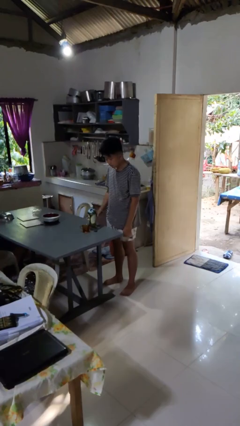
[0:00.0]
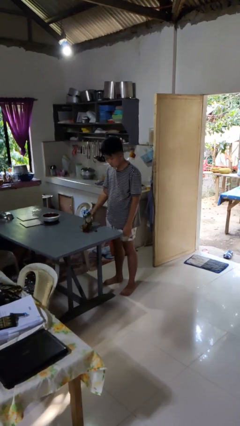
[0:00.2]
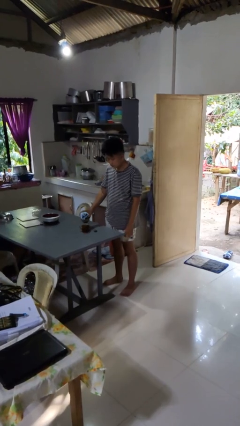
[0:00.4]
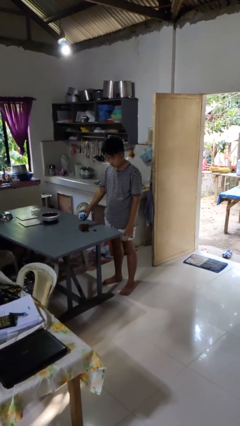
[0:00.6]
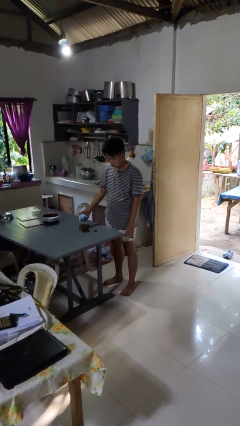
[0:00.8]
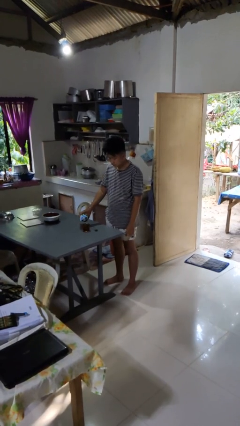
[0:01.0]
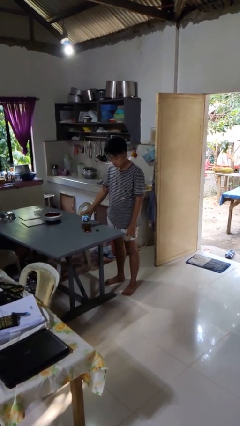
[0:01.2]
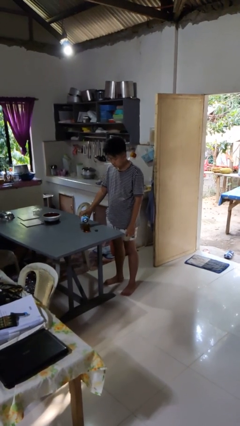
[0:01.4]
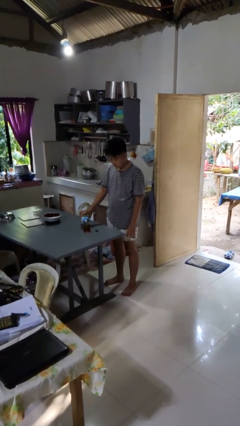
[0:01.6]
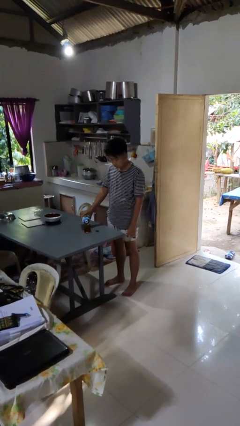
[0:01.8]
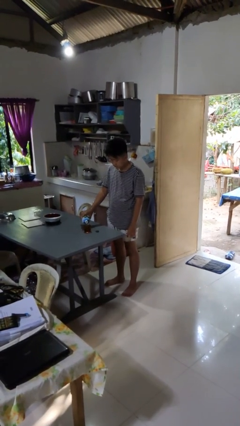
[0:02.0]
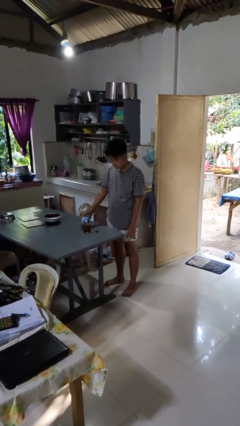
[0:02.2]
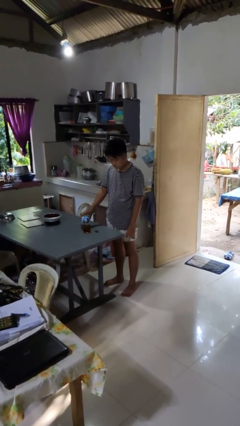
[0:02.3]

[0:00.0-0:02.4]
person pours liquid into cup

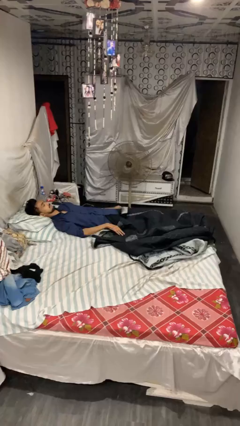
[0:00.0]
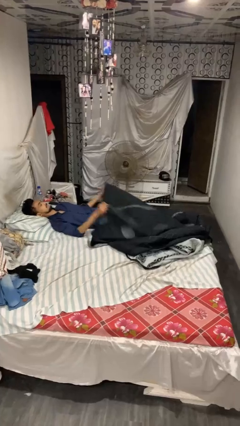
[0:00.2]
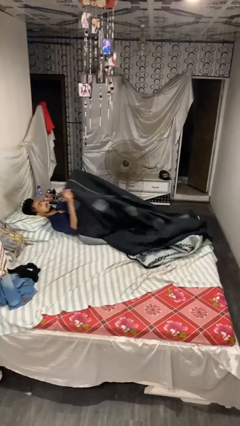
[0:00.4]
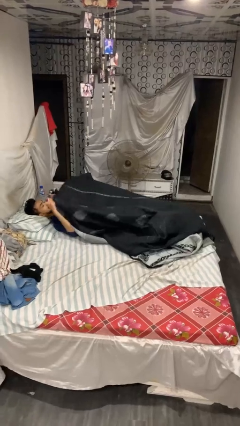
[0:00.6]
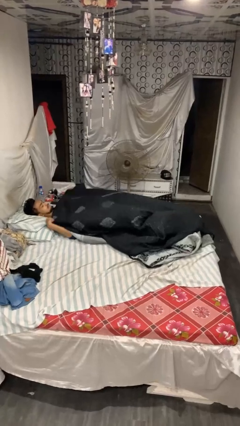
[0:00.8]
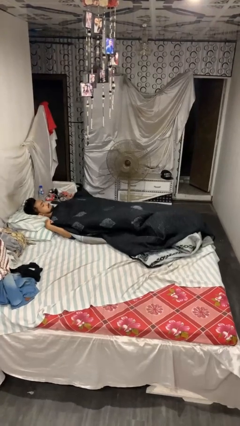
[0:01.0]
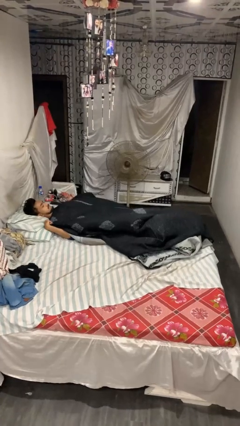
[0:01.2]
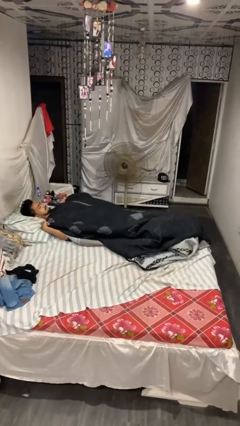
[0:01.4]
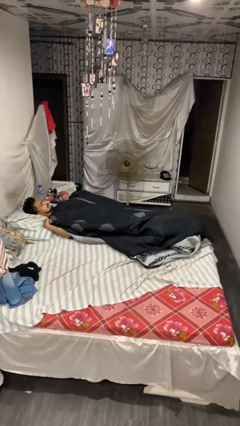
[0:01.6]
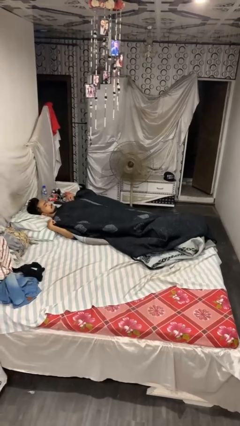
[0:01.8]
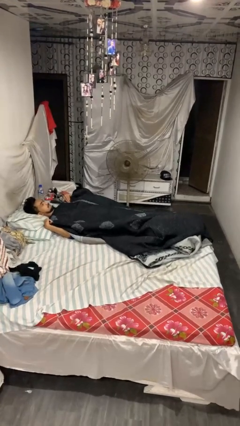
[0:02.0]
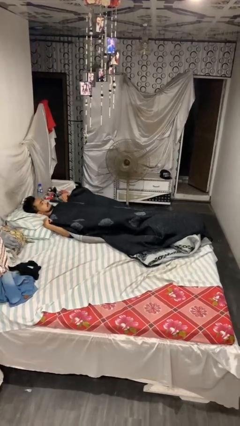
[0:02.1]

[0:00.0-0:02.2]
person covers with blanket

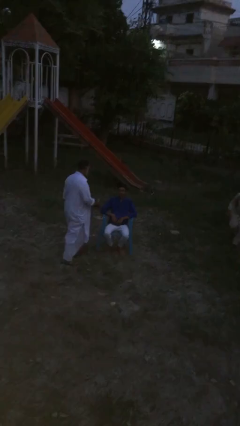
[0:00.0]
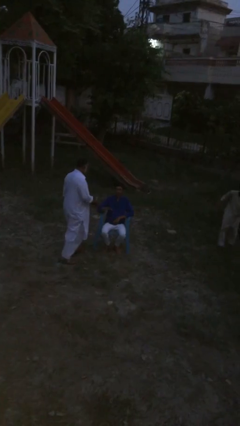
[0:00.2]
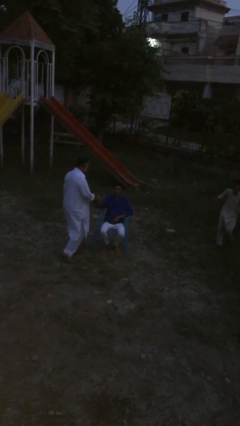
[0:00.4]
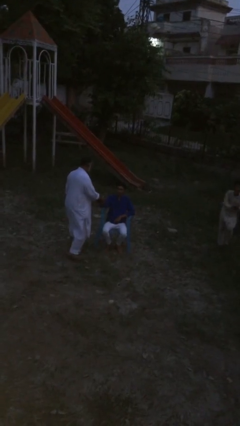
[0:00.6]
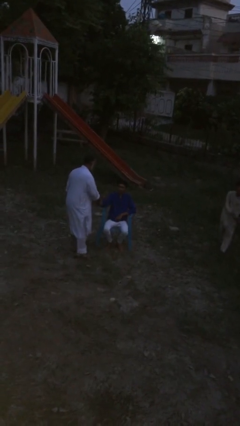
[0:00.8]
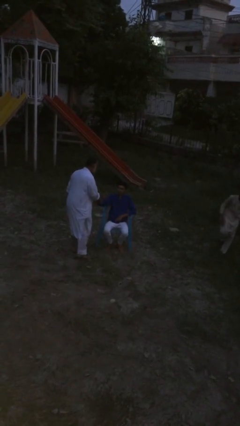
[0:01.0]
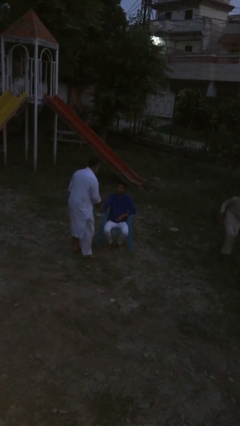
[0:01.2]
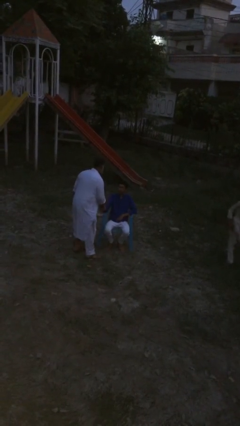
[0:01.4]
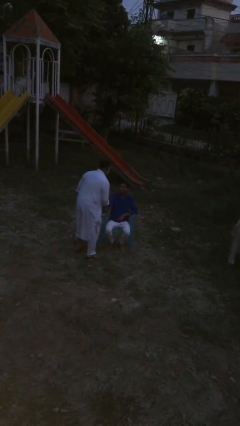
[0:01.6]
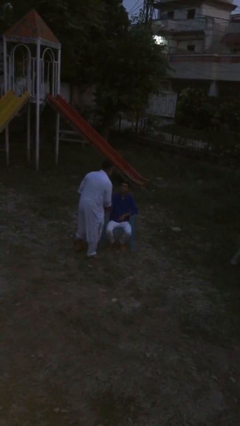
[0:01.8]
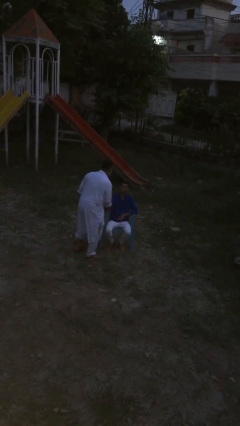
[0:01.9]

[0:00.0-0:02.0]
person shakes hand

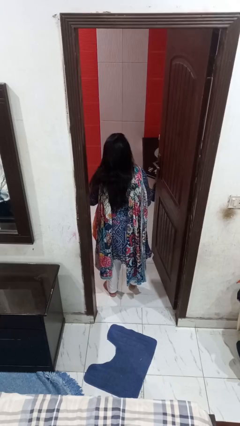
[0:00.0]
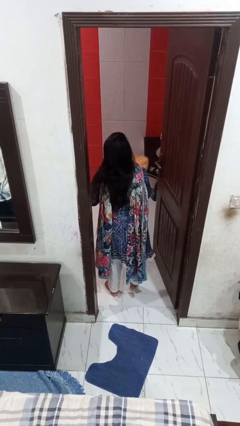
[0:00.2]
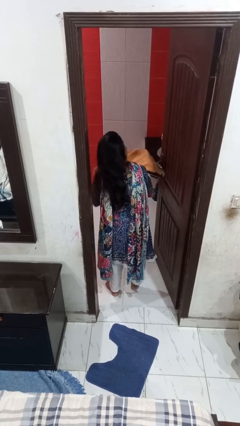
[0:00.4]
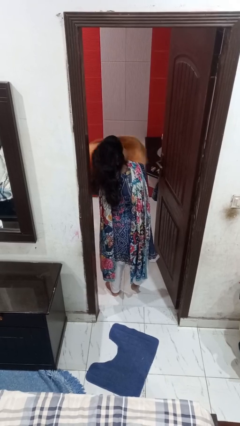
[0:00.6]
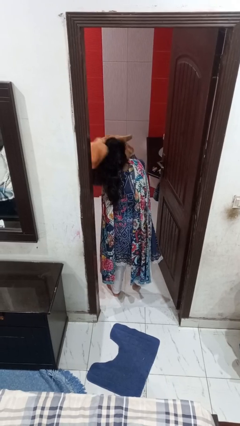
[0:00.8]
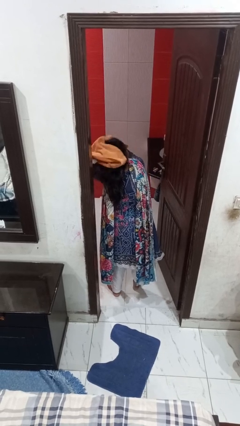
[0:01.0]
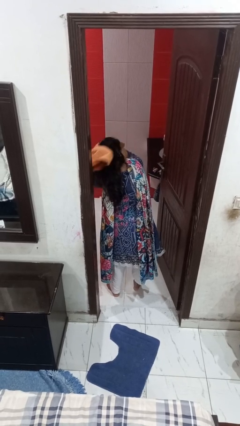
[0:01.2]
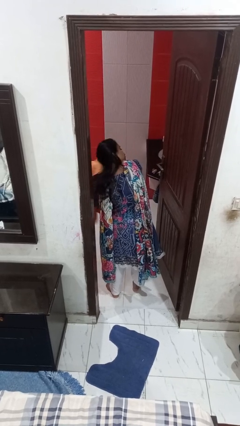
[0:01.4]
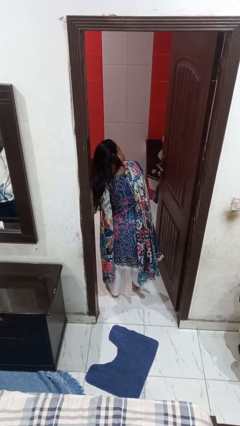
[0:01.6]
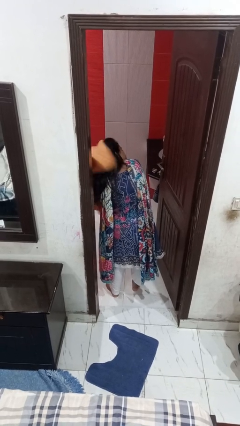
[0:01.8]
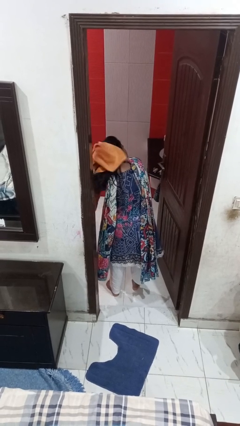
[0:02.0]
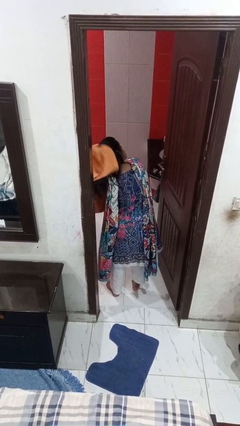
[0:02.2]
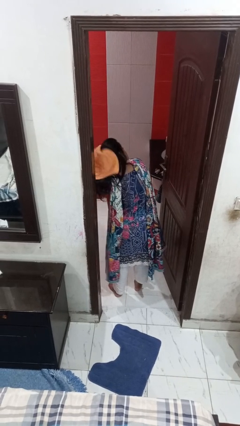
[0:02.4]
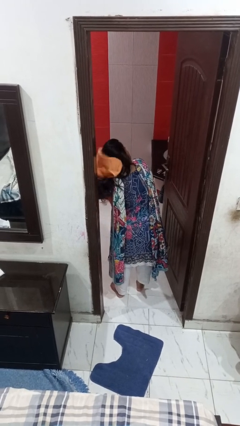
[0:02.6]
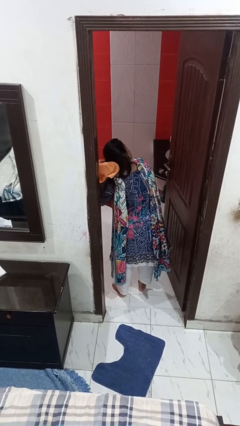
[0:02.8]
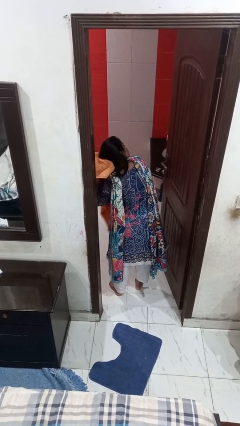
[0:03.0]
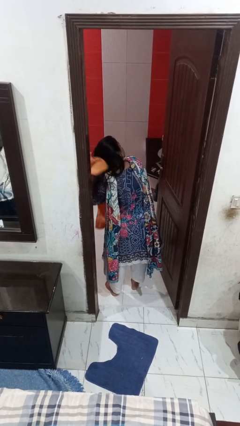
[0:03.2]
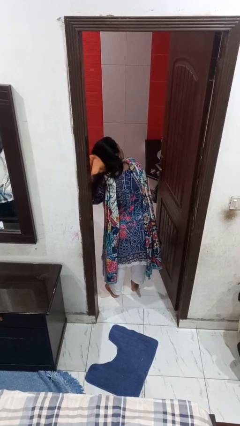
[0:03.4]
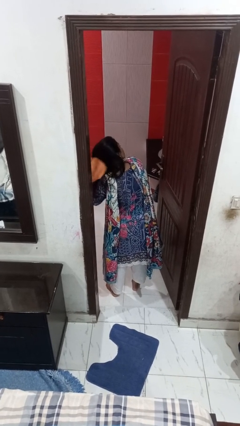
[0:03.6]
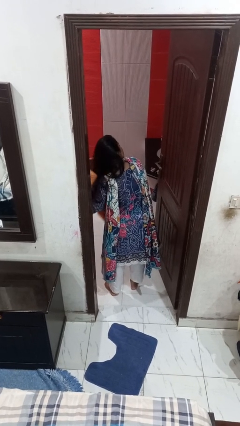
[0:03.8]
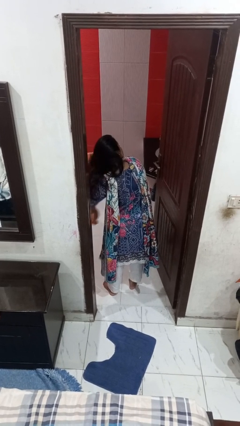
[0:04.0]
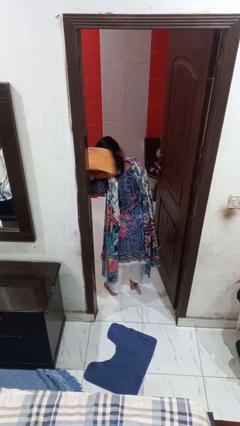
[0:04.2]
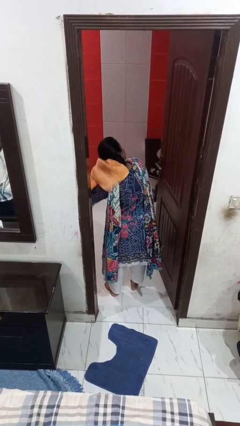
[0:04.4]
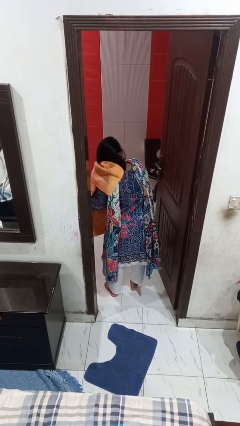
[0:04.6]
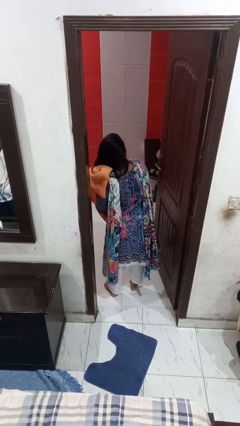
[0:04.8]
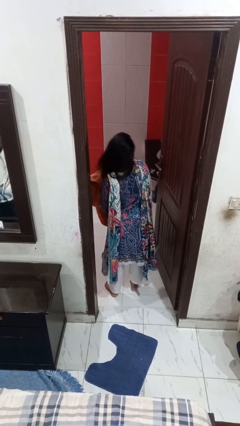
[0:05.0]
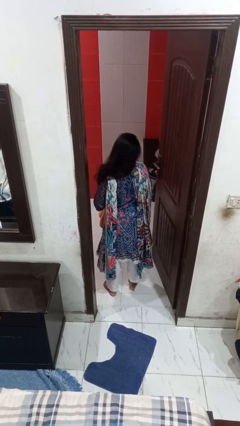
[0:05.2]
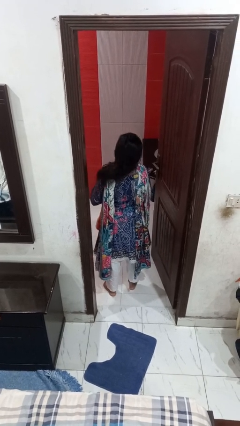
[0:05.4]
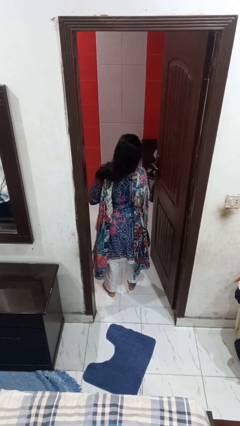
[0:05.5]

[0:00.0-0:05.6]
person dries hair with towel

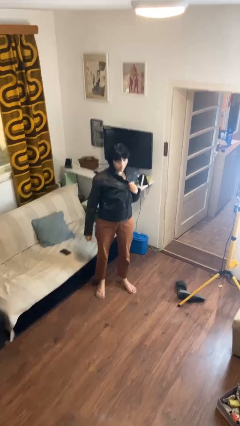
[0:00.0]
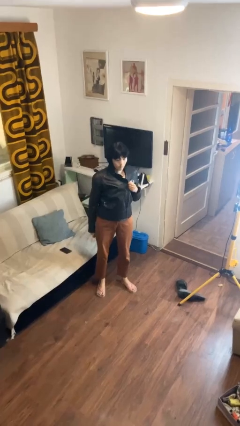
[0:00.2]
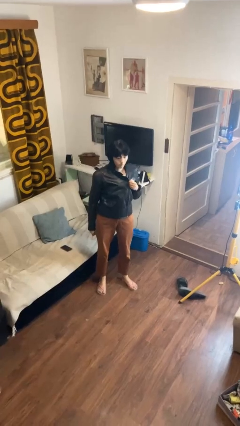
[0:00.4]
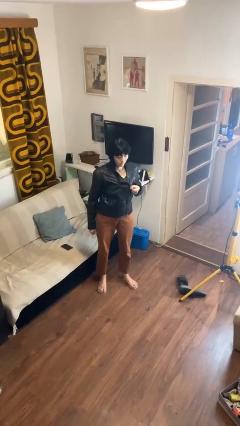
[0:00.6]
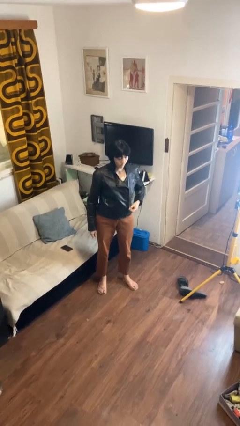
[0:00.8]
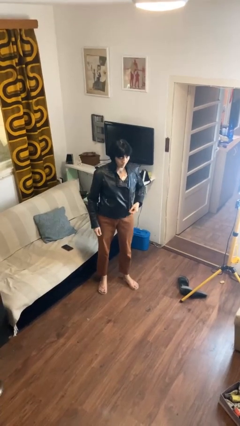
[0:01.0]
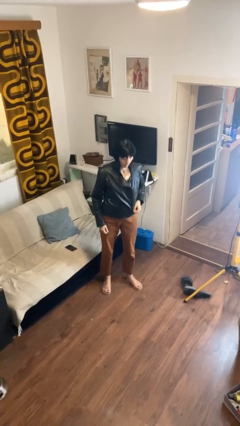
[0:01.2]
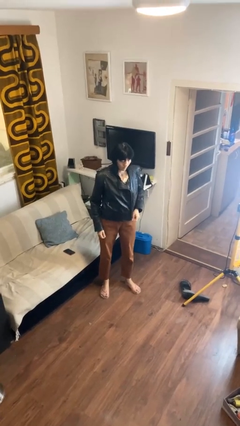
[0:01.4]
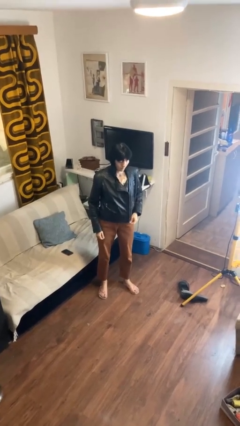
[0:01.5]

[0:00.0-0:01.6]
person unzips jacket

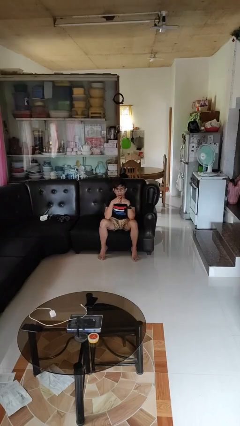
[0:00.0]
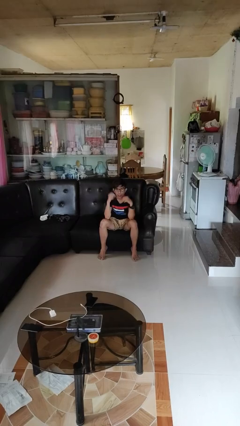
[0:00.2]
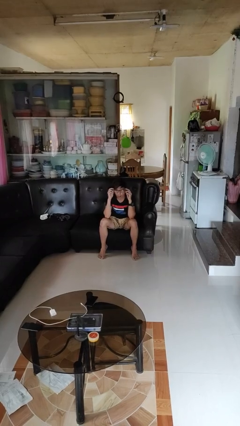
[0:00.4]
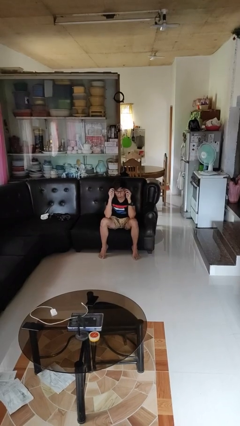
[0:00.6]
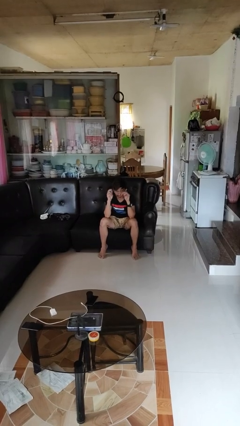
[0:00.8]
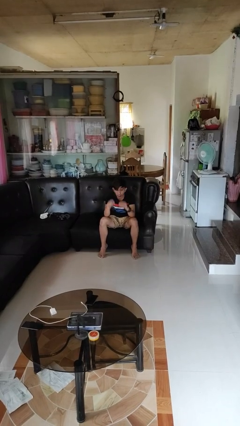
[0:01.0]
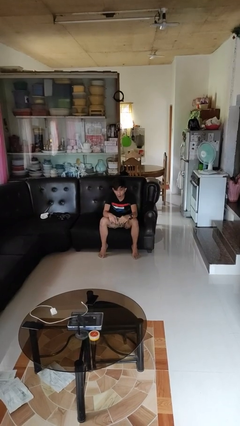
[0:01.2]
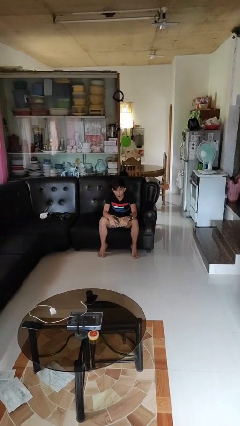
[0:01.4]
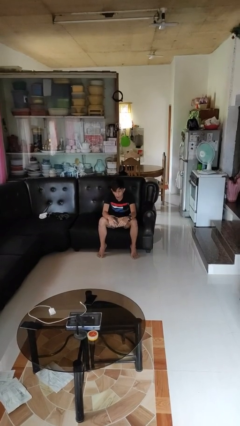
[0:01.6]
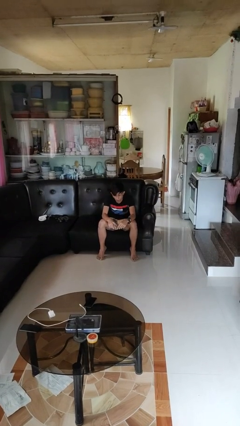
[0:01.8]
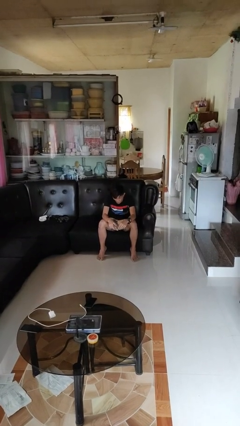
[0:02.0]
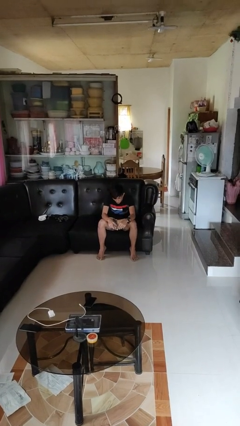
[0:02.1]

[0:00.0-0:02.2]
person takes off glasses

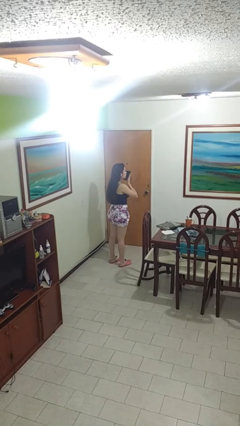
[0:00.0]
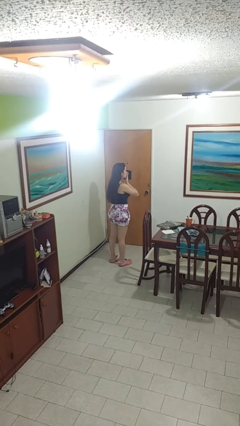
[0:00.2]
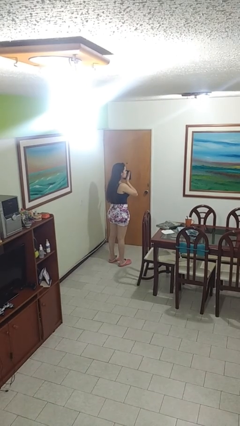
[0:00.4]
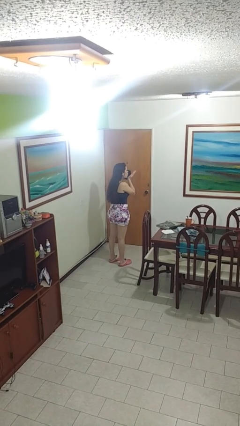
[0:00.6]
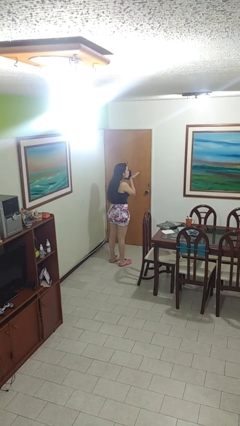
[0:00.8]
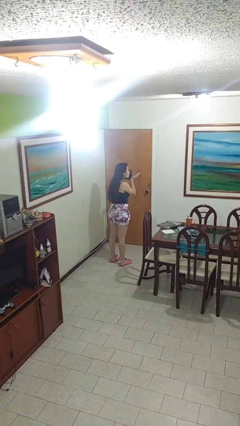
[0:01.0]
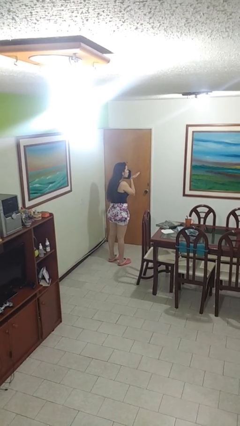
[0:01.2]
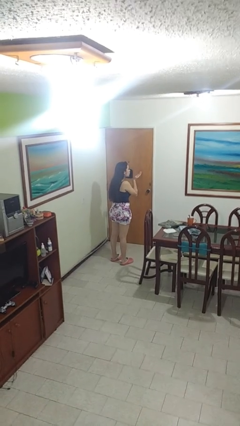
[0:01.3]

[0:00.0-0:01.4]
person gestures blow kiss
